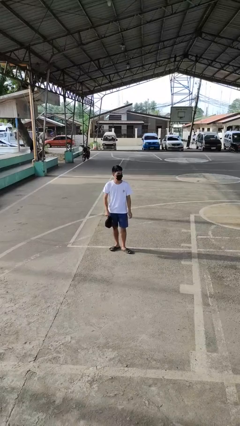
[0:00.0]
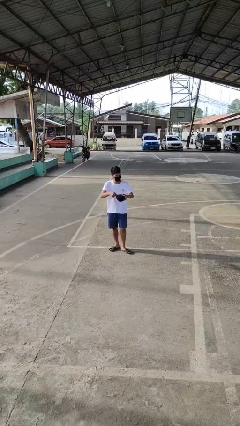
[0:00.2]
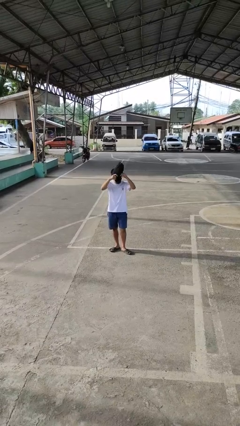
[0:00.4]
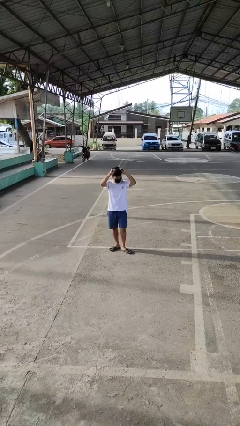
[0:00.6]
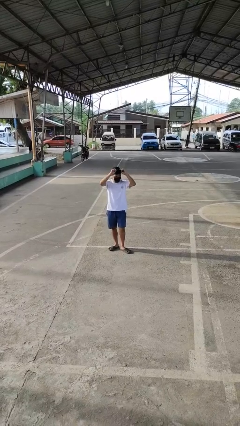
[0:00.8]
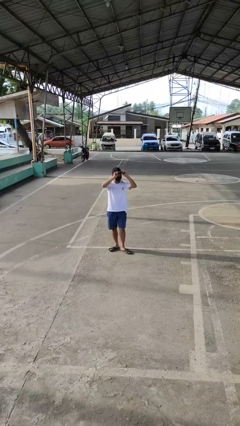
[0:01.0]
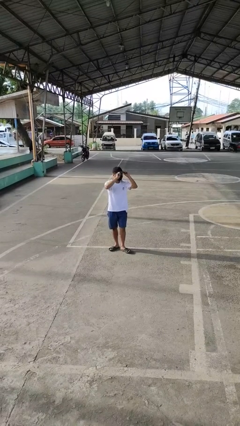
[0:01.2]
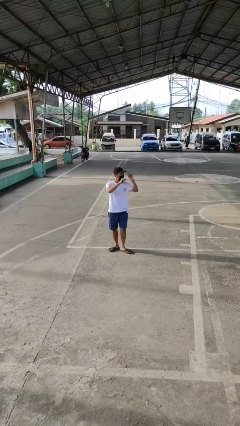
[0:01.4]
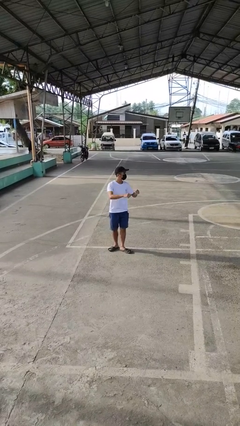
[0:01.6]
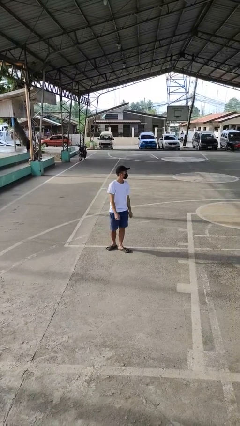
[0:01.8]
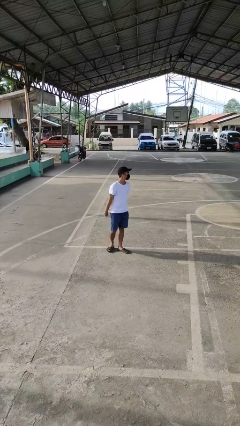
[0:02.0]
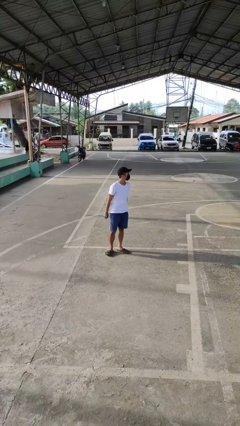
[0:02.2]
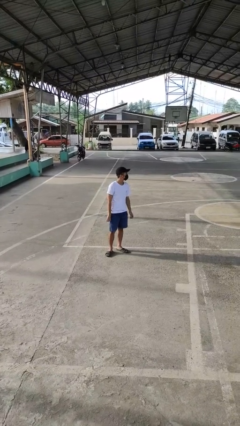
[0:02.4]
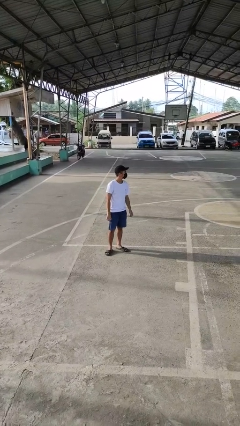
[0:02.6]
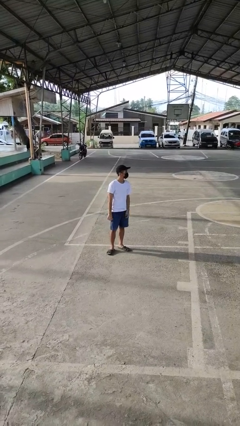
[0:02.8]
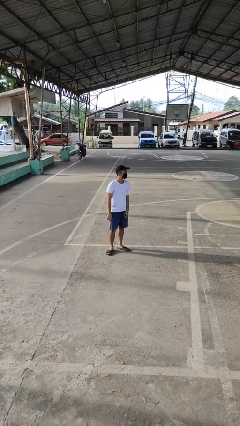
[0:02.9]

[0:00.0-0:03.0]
person puts on hat

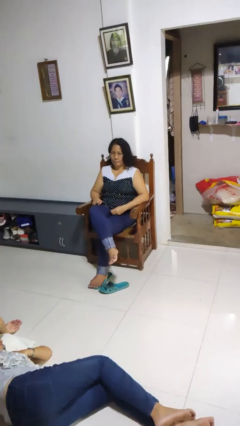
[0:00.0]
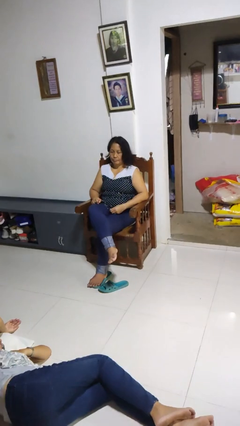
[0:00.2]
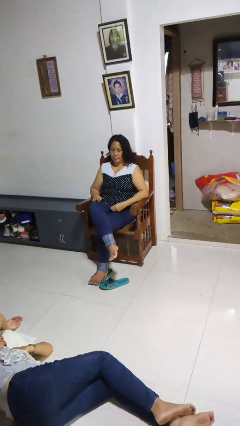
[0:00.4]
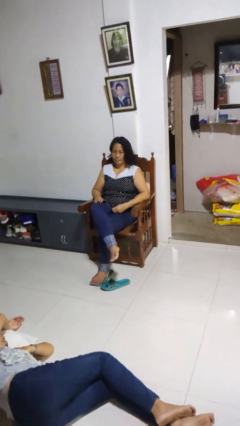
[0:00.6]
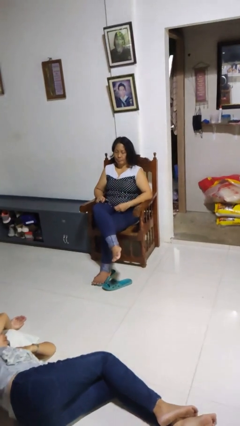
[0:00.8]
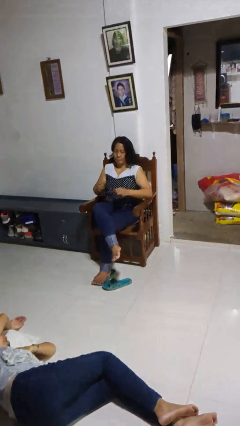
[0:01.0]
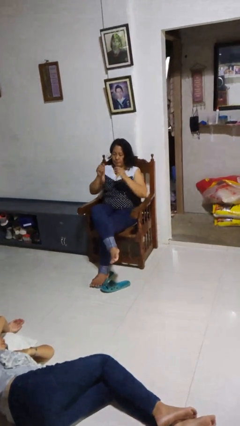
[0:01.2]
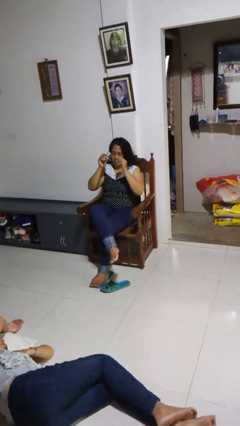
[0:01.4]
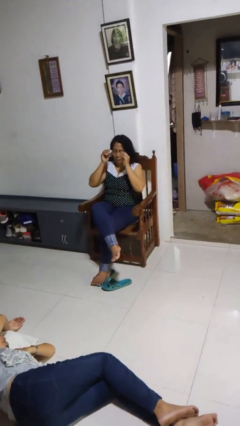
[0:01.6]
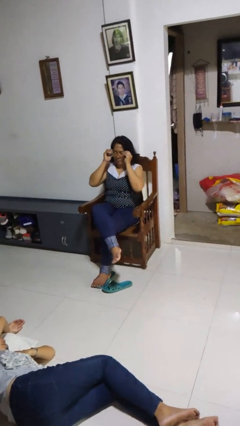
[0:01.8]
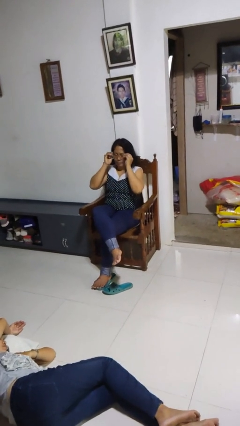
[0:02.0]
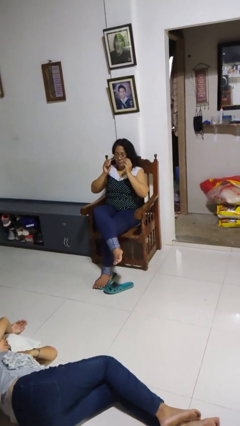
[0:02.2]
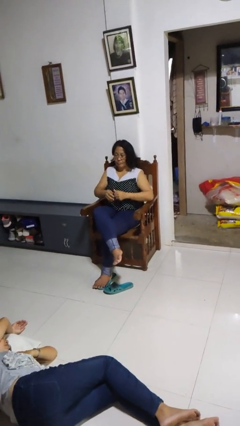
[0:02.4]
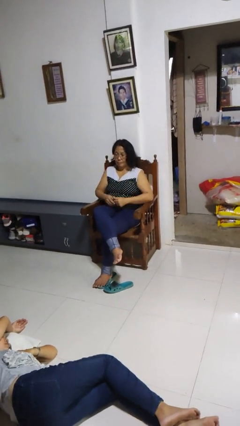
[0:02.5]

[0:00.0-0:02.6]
person puts on glasses

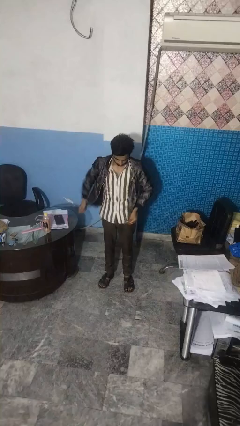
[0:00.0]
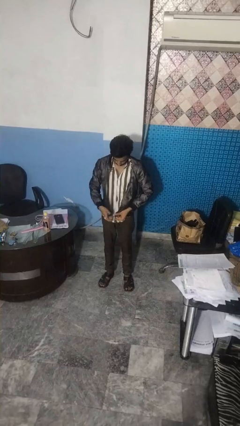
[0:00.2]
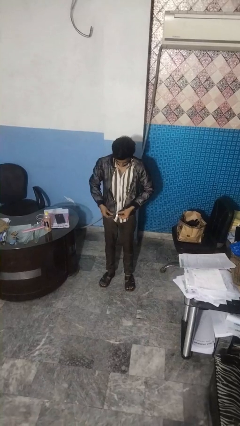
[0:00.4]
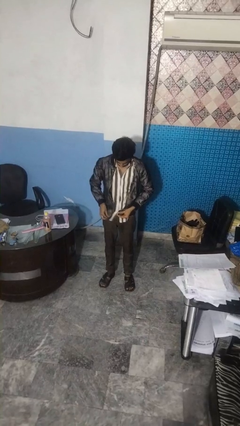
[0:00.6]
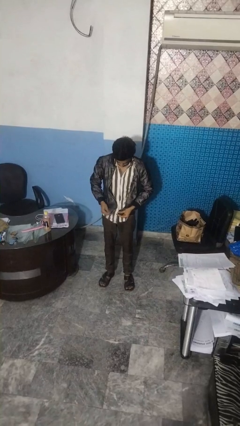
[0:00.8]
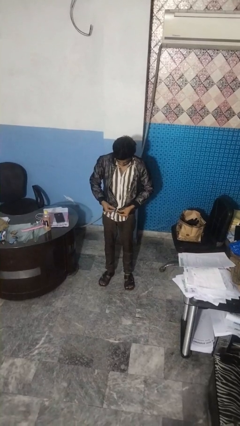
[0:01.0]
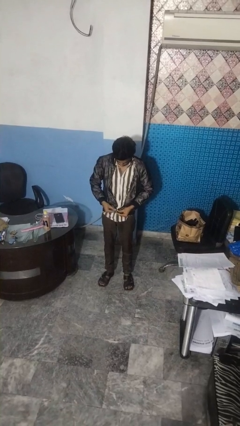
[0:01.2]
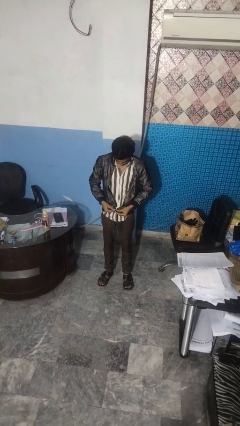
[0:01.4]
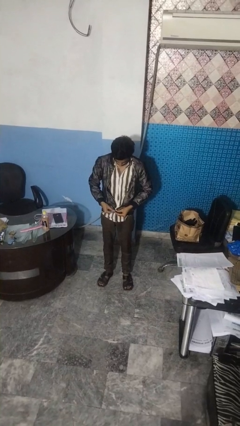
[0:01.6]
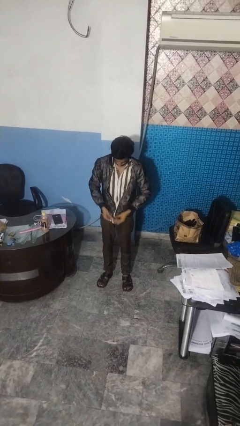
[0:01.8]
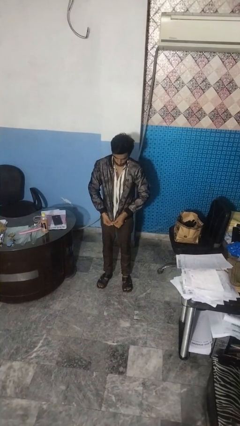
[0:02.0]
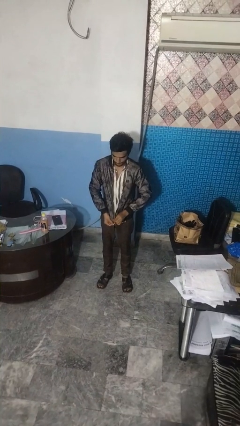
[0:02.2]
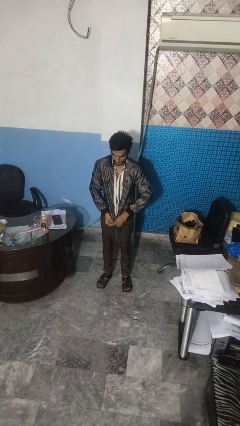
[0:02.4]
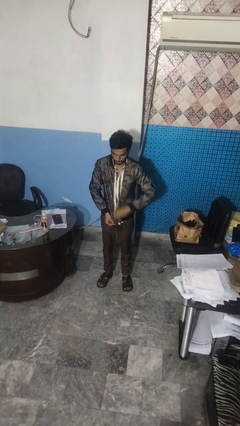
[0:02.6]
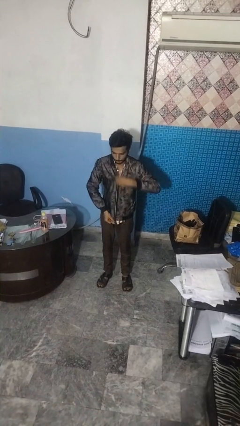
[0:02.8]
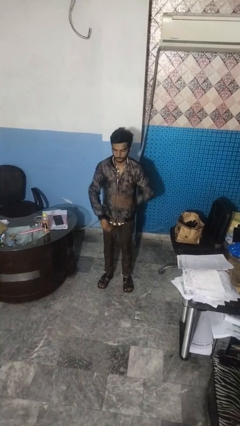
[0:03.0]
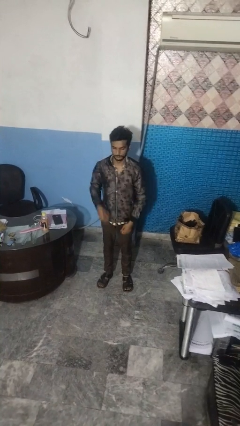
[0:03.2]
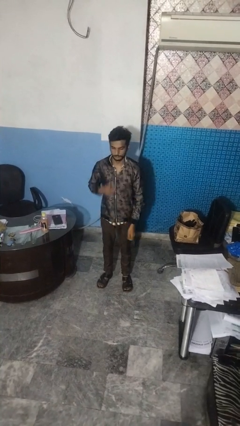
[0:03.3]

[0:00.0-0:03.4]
person zips up jacket

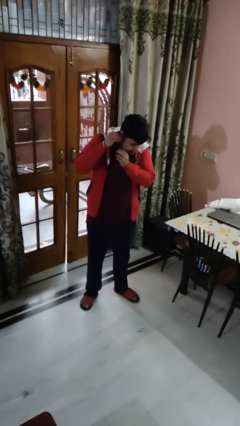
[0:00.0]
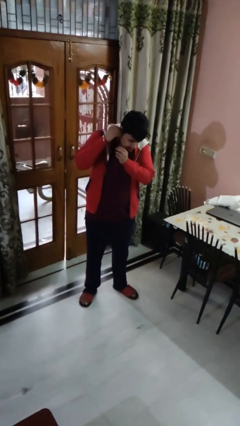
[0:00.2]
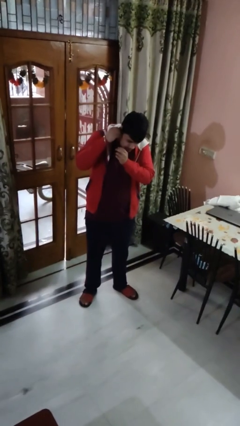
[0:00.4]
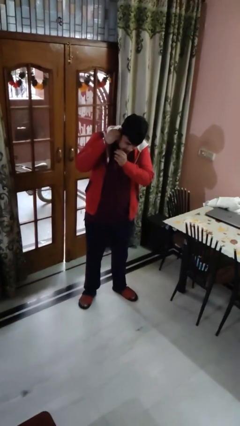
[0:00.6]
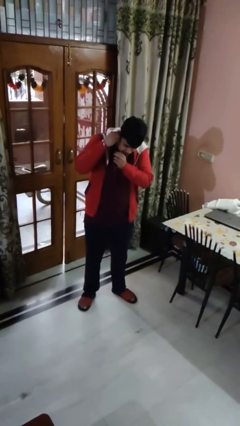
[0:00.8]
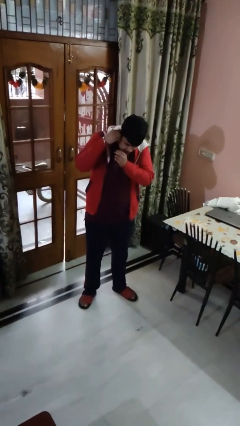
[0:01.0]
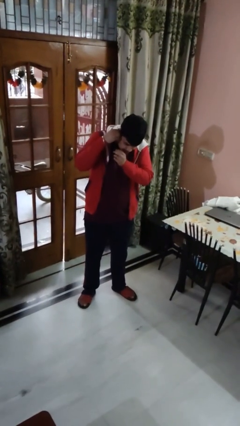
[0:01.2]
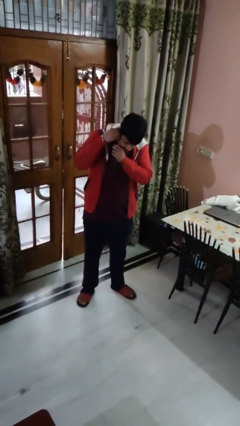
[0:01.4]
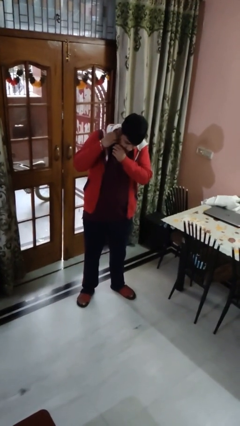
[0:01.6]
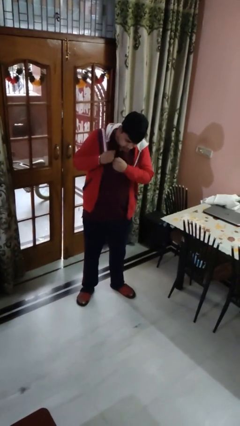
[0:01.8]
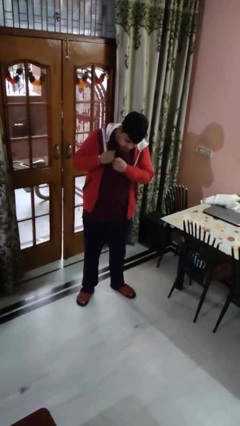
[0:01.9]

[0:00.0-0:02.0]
person puts on earrings

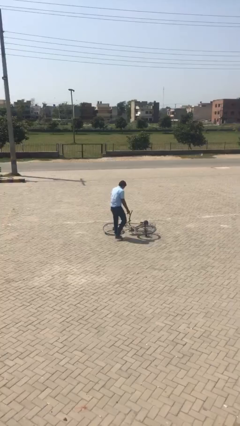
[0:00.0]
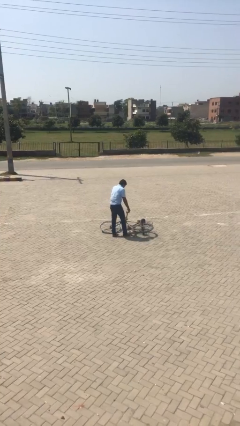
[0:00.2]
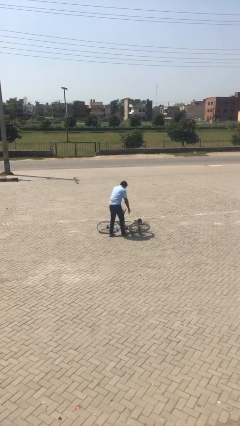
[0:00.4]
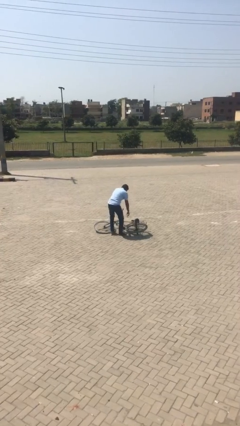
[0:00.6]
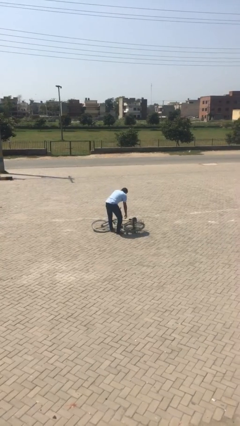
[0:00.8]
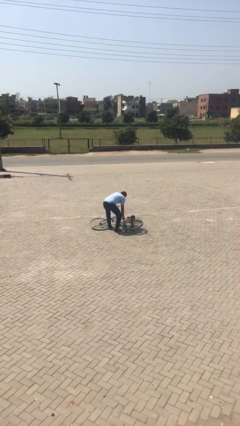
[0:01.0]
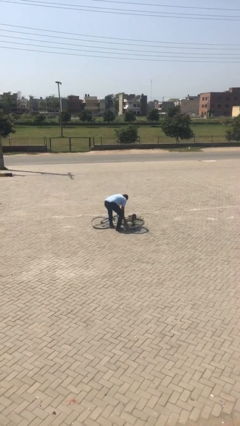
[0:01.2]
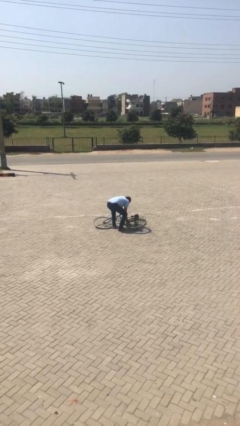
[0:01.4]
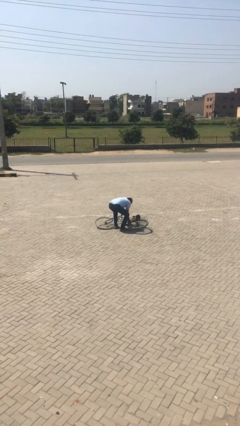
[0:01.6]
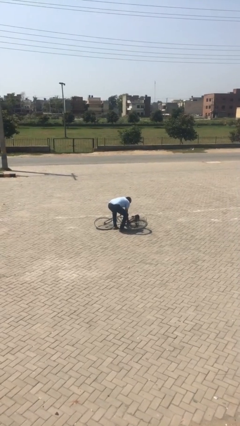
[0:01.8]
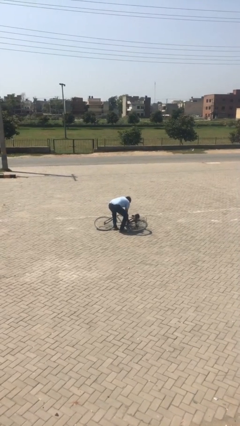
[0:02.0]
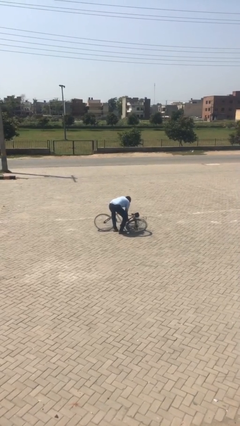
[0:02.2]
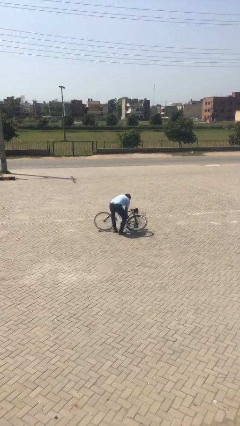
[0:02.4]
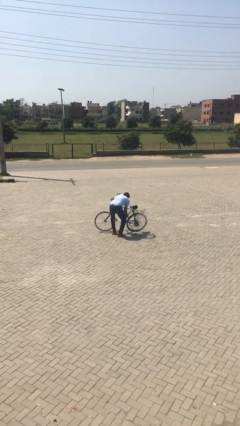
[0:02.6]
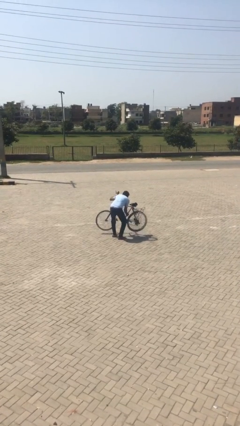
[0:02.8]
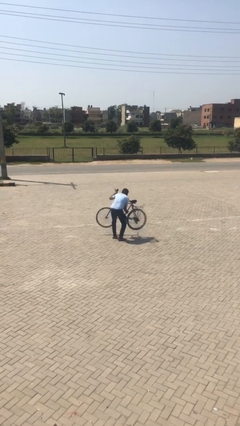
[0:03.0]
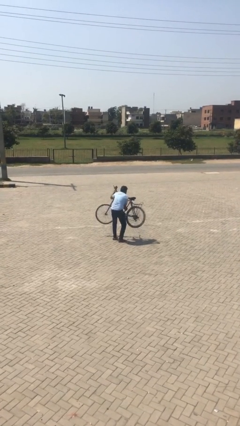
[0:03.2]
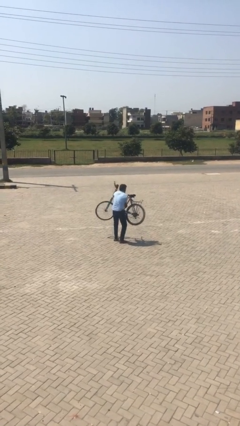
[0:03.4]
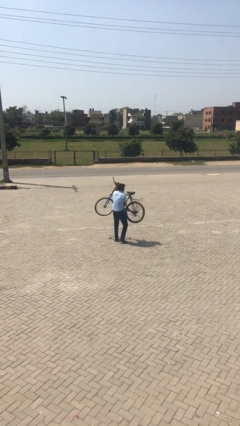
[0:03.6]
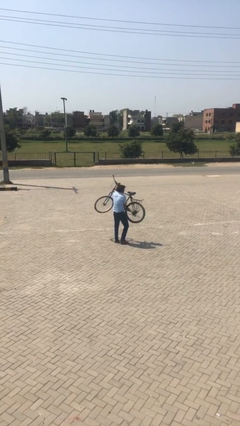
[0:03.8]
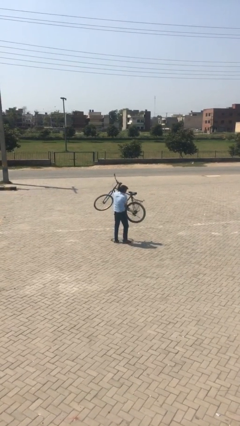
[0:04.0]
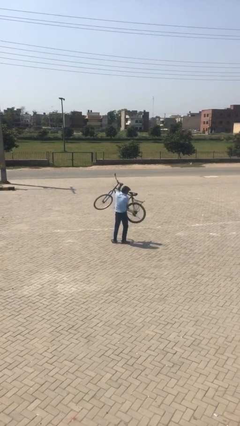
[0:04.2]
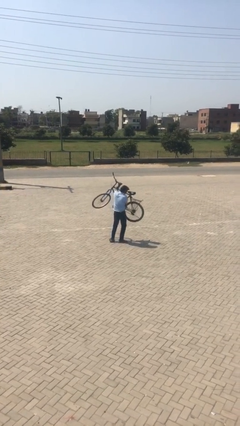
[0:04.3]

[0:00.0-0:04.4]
person picks up object from floor

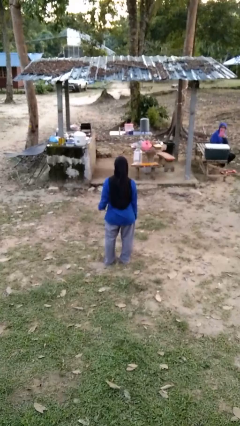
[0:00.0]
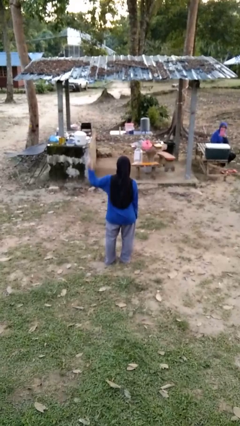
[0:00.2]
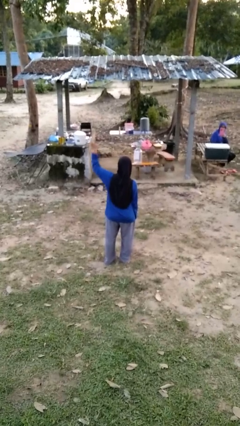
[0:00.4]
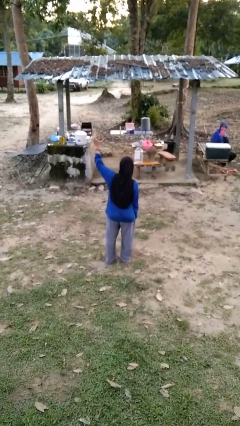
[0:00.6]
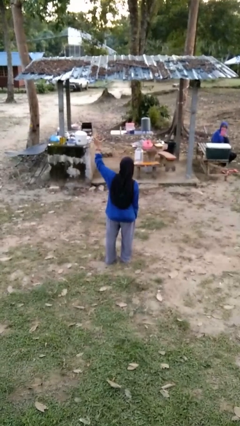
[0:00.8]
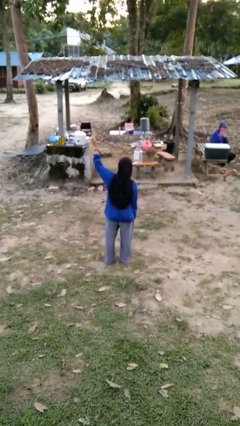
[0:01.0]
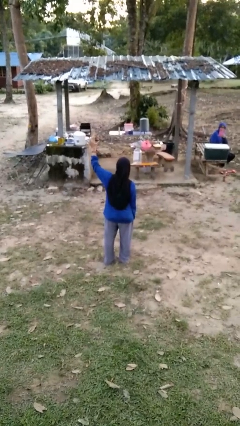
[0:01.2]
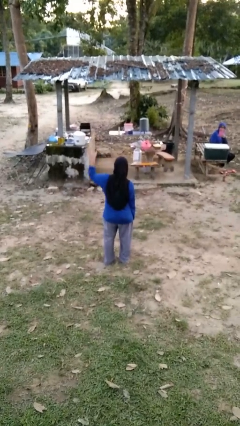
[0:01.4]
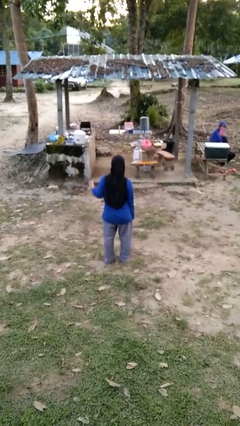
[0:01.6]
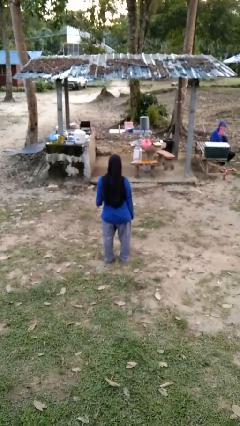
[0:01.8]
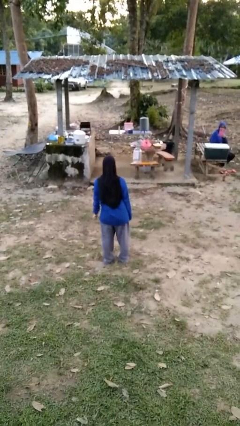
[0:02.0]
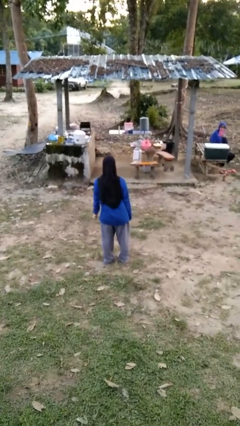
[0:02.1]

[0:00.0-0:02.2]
person gestures number five

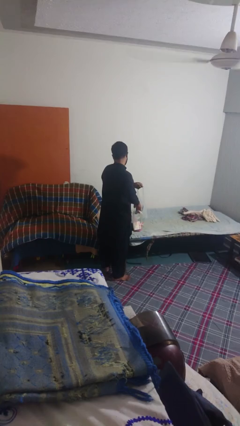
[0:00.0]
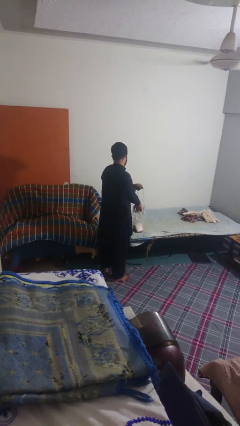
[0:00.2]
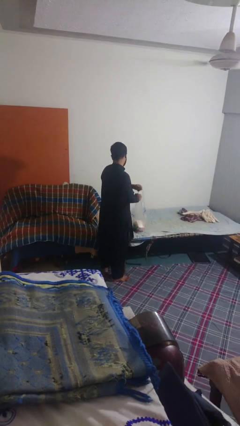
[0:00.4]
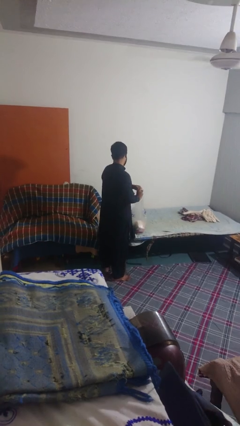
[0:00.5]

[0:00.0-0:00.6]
person searches in bag
